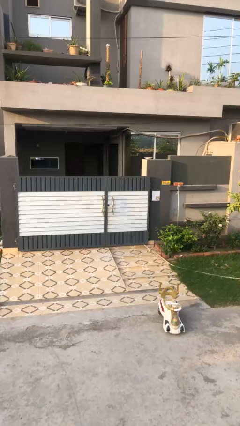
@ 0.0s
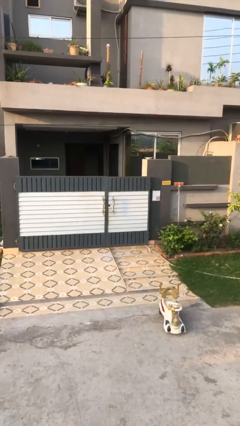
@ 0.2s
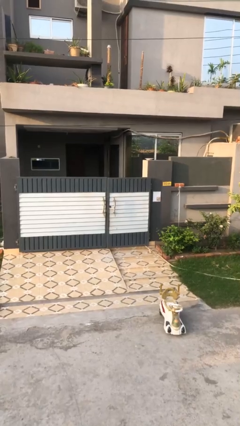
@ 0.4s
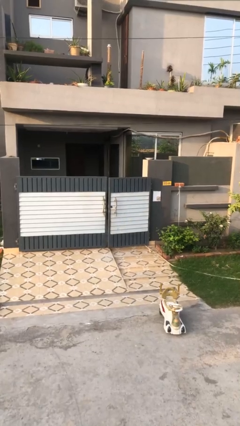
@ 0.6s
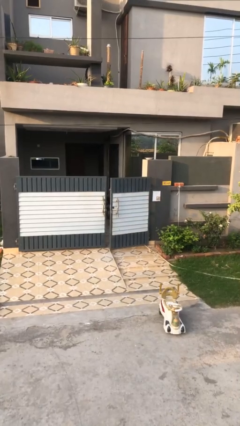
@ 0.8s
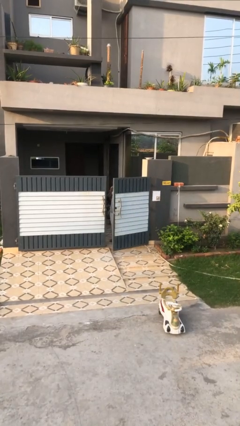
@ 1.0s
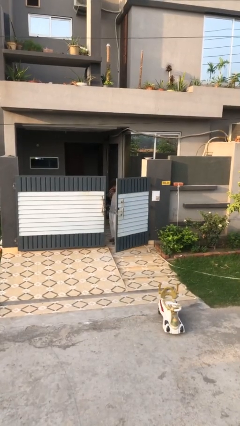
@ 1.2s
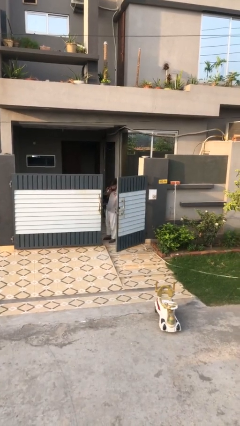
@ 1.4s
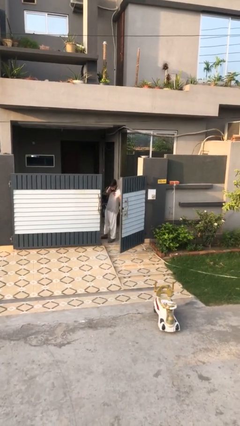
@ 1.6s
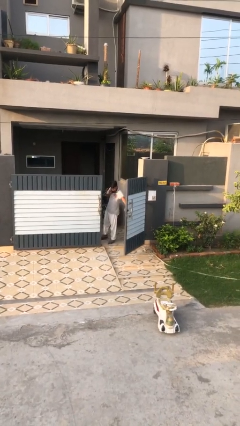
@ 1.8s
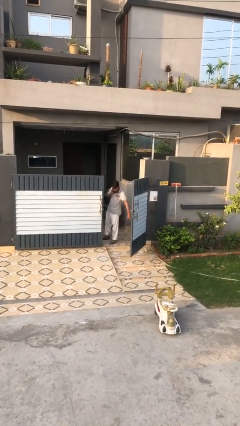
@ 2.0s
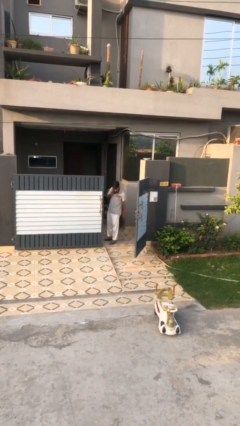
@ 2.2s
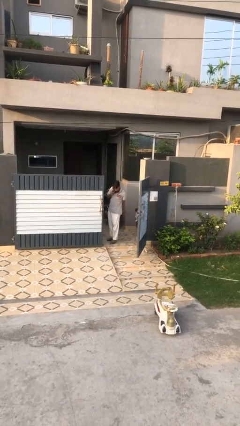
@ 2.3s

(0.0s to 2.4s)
person opens facility door

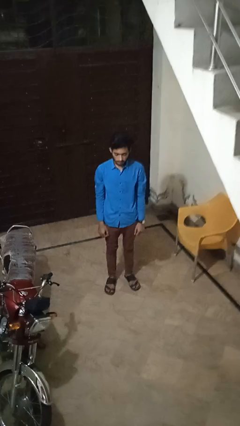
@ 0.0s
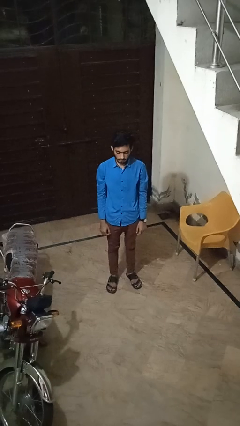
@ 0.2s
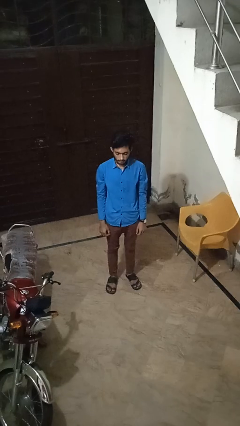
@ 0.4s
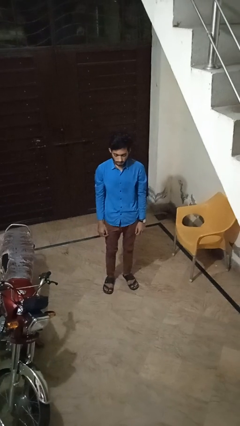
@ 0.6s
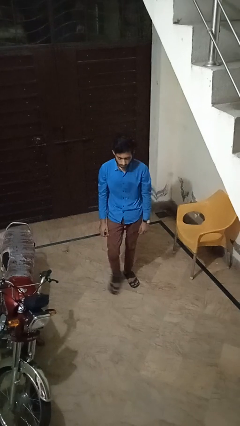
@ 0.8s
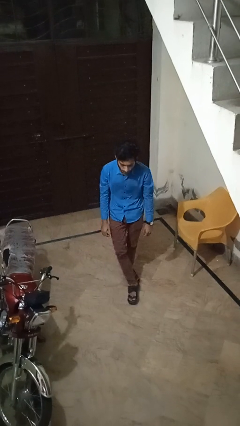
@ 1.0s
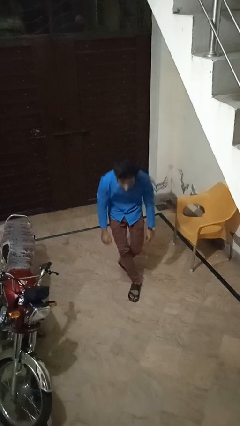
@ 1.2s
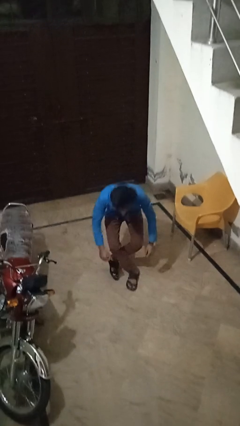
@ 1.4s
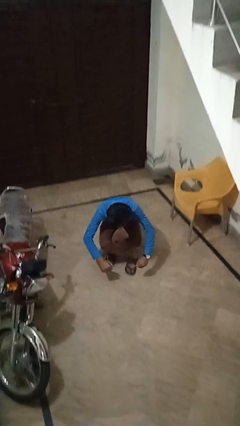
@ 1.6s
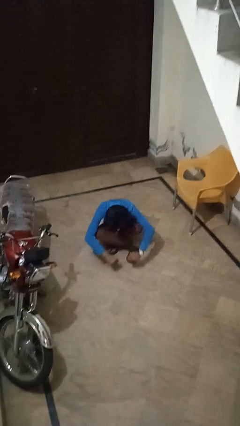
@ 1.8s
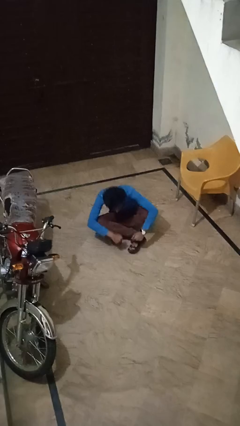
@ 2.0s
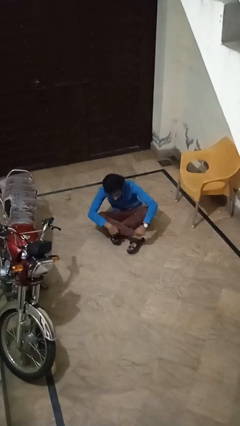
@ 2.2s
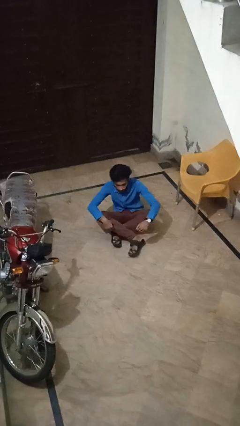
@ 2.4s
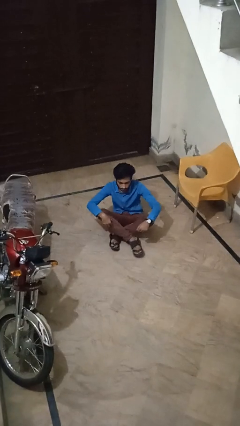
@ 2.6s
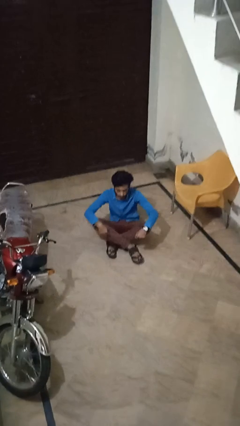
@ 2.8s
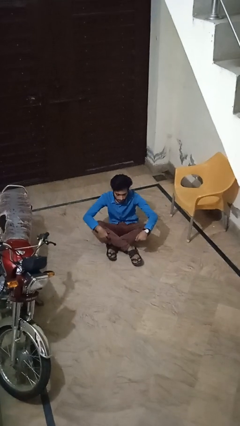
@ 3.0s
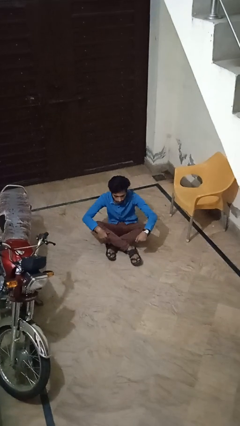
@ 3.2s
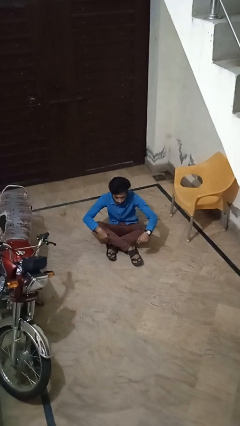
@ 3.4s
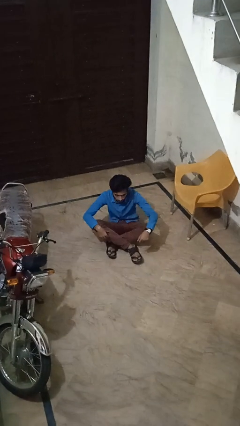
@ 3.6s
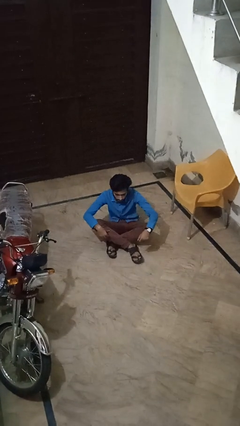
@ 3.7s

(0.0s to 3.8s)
person sits crisscross

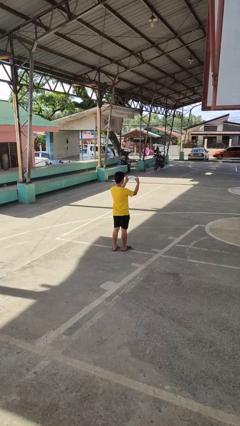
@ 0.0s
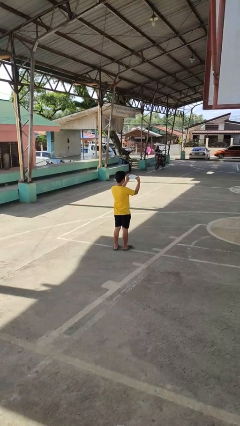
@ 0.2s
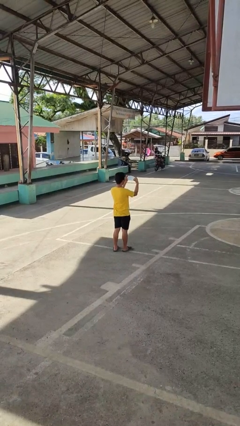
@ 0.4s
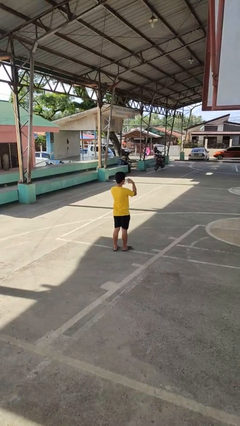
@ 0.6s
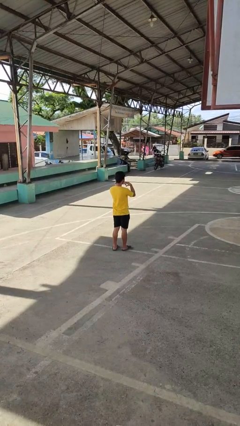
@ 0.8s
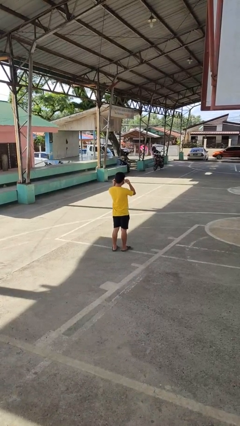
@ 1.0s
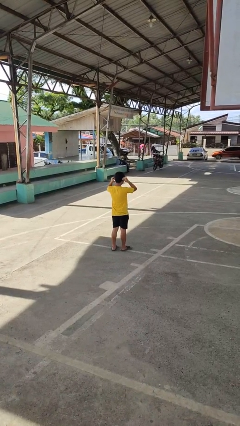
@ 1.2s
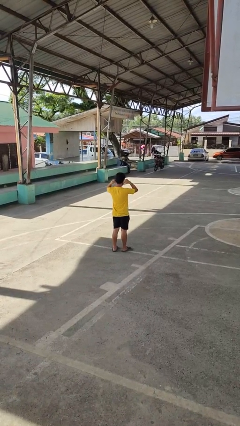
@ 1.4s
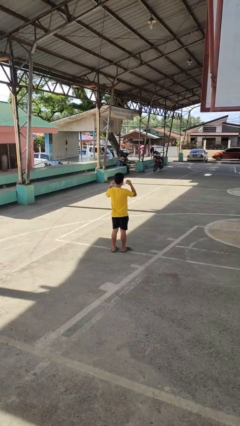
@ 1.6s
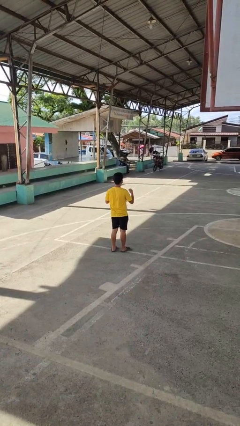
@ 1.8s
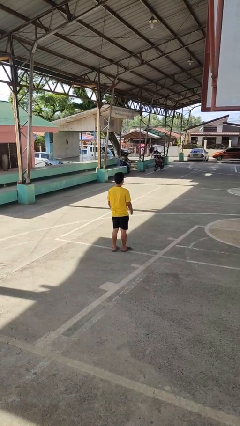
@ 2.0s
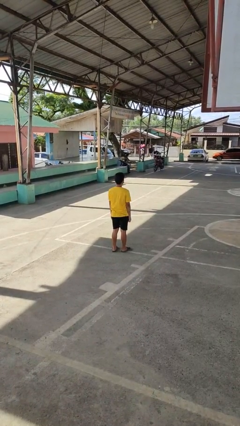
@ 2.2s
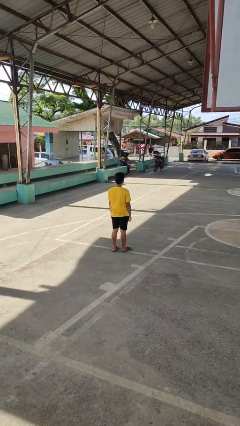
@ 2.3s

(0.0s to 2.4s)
person puts on facemask

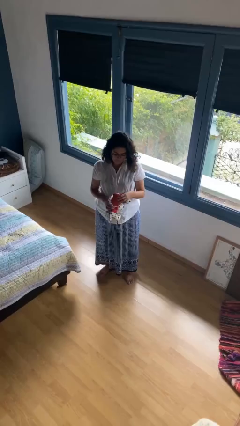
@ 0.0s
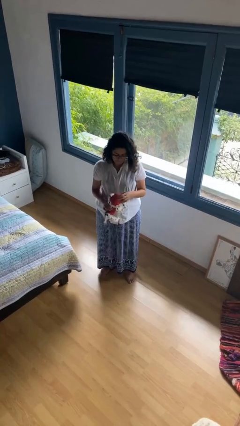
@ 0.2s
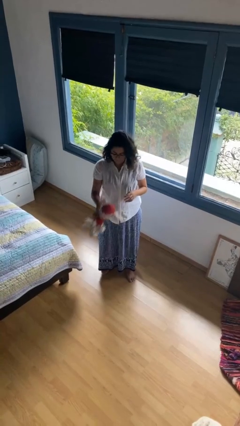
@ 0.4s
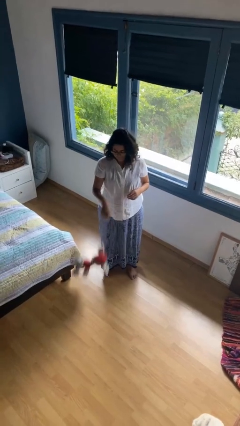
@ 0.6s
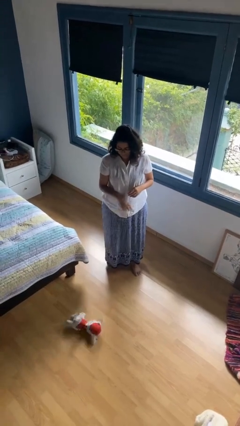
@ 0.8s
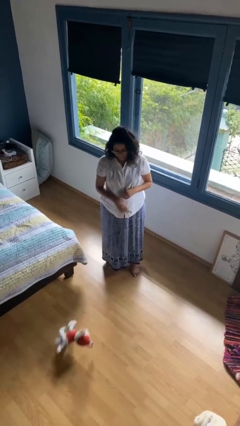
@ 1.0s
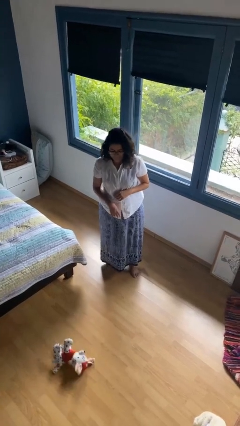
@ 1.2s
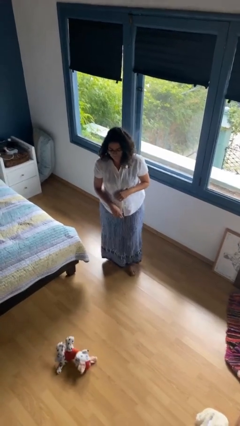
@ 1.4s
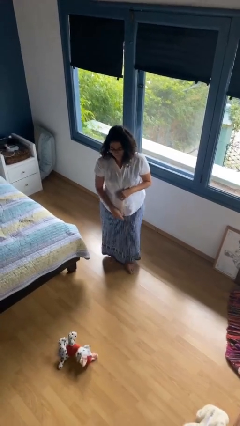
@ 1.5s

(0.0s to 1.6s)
person throws object to ground

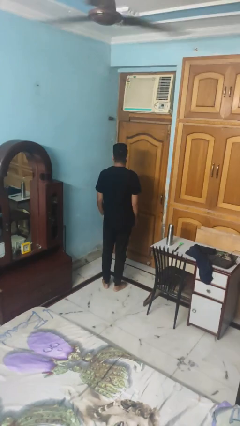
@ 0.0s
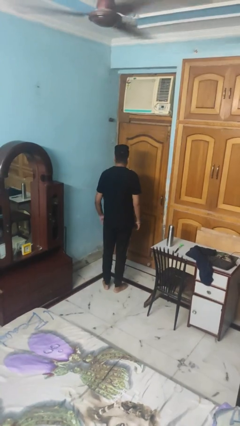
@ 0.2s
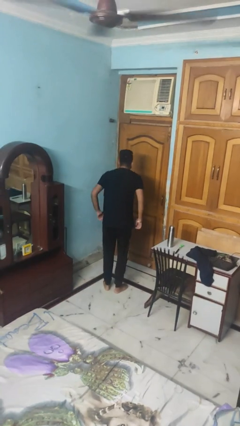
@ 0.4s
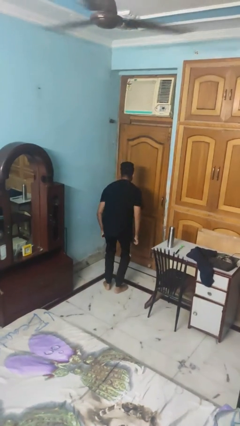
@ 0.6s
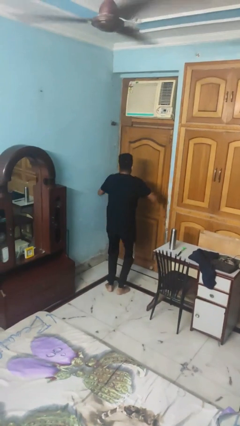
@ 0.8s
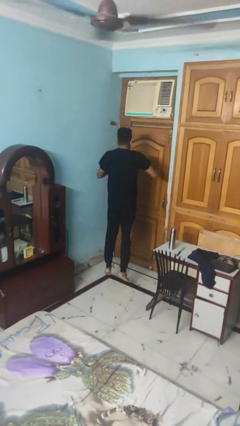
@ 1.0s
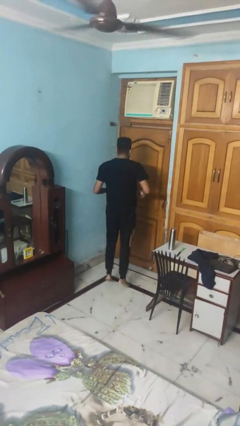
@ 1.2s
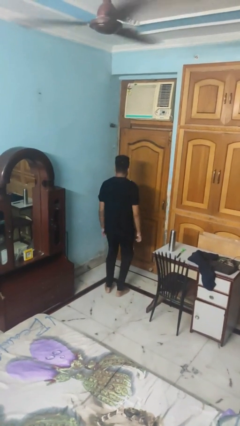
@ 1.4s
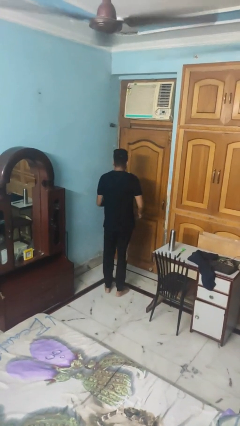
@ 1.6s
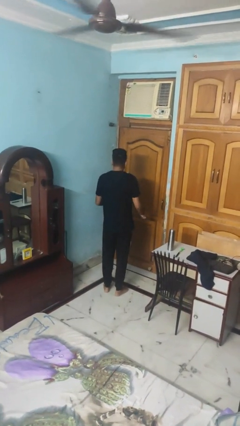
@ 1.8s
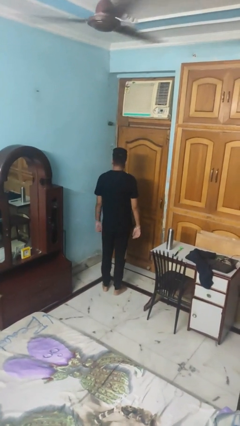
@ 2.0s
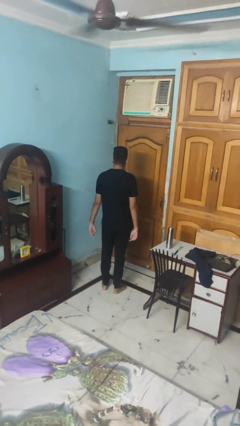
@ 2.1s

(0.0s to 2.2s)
person jumps

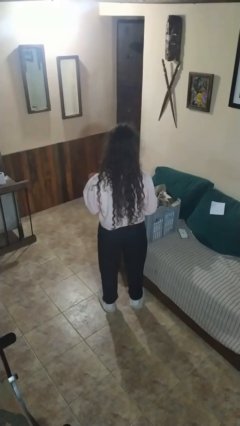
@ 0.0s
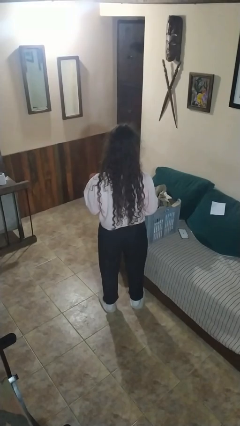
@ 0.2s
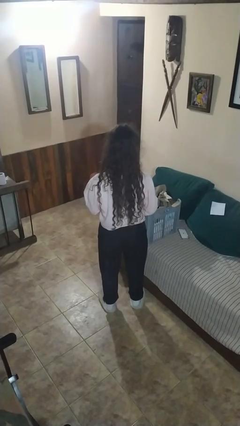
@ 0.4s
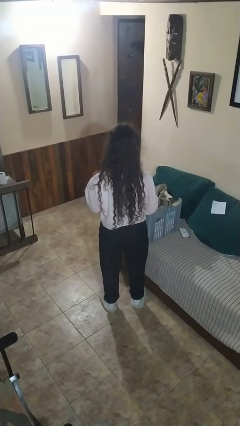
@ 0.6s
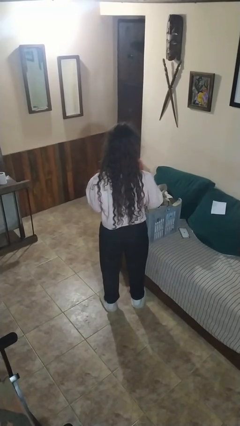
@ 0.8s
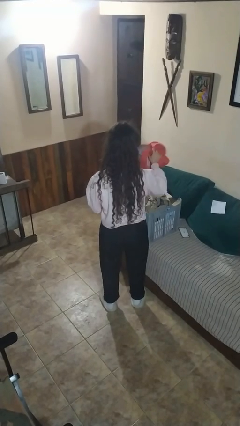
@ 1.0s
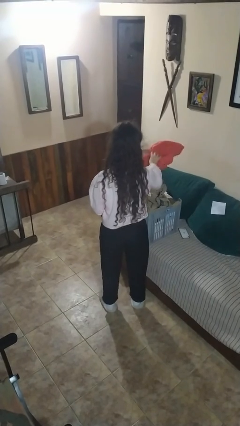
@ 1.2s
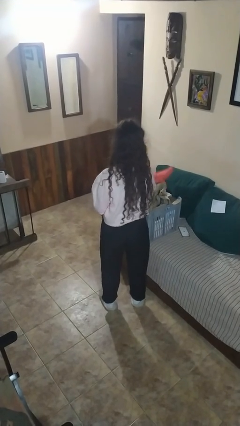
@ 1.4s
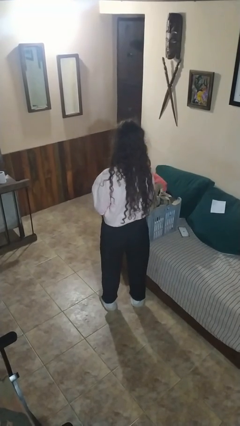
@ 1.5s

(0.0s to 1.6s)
person puts object into basket

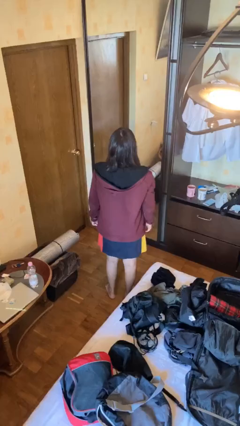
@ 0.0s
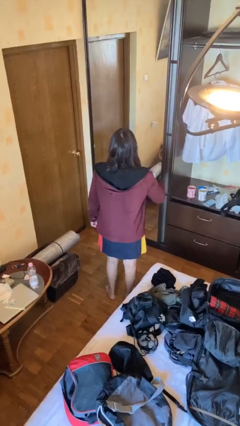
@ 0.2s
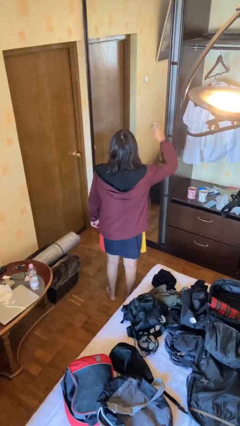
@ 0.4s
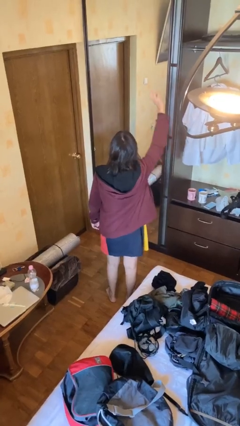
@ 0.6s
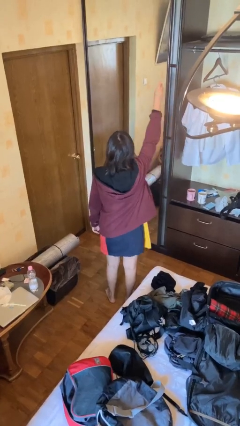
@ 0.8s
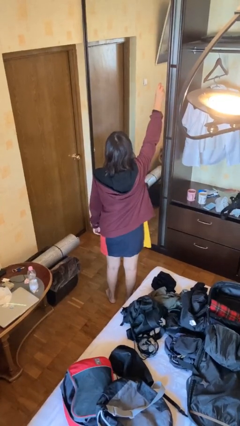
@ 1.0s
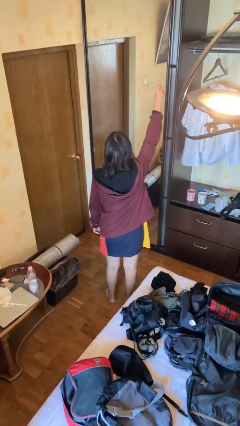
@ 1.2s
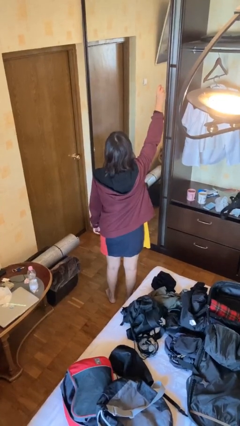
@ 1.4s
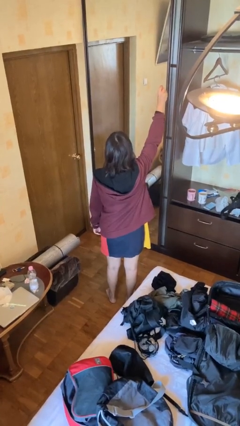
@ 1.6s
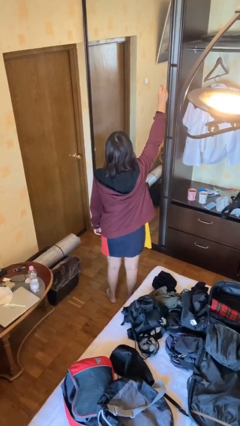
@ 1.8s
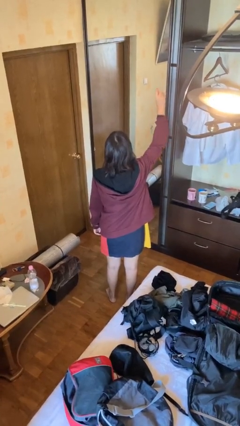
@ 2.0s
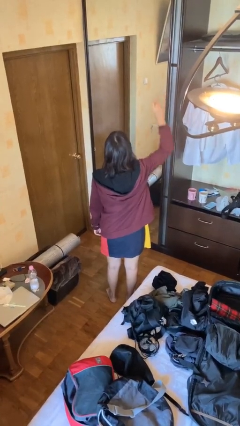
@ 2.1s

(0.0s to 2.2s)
person gestures raise hand

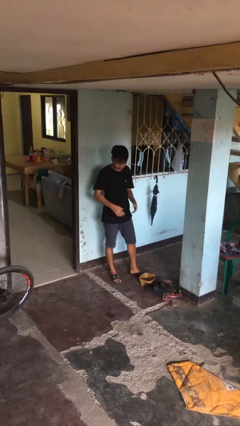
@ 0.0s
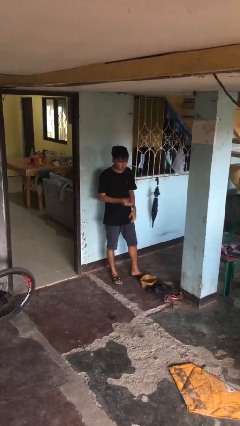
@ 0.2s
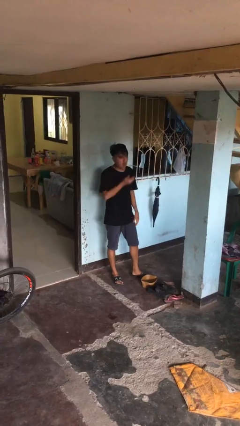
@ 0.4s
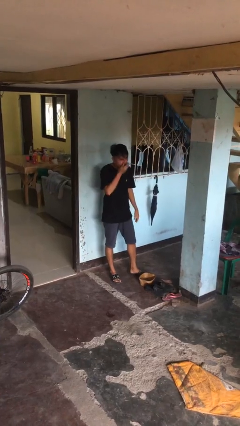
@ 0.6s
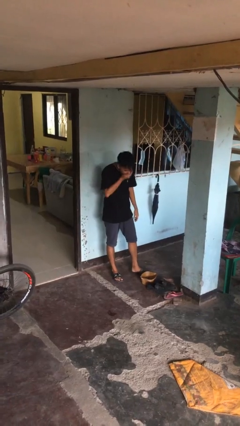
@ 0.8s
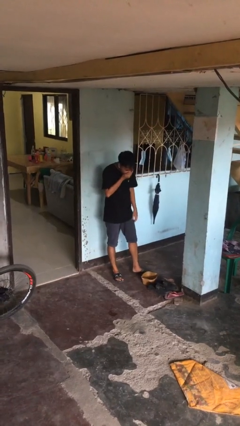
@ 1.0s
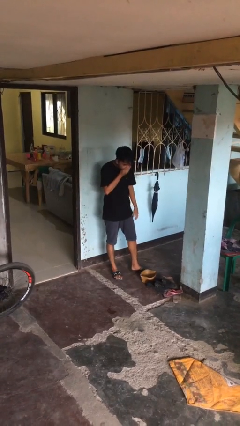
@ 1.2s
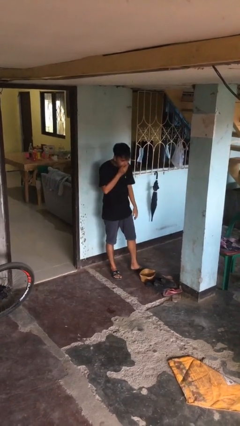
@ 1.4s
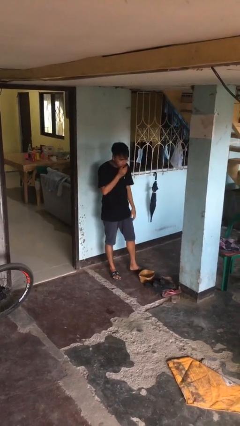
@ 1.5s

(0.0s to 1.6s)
person sneezes into hand
